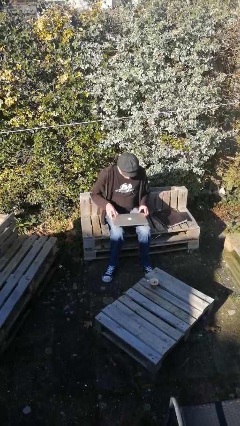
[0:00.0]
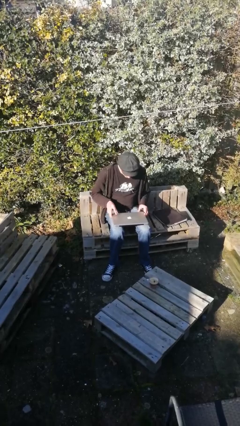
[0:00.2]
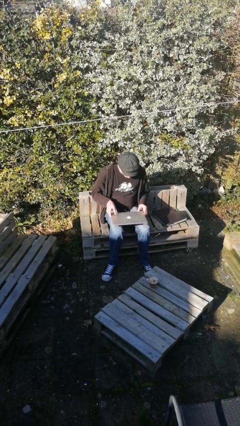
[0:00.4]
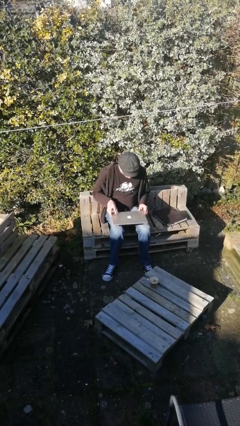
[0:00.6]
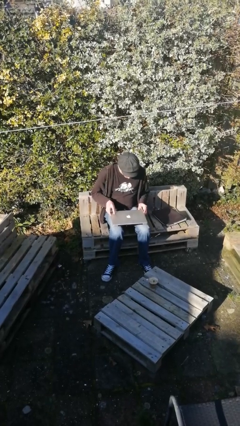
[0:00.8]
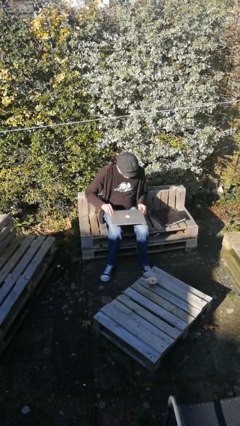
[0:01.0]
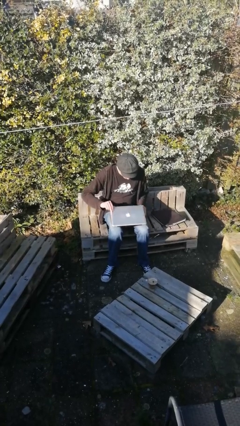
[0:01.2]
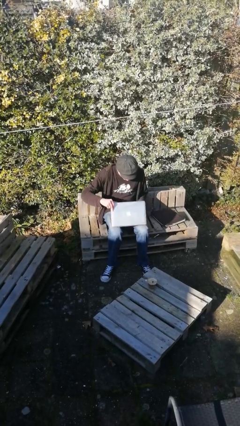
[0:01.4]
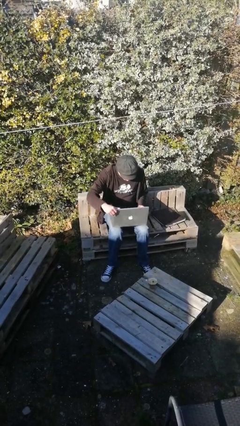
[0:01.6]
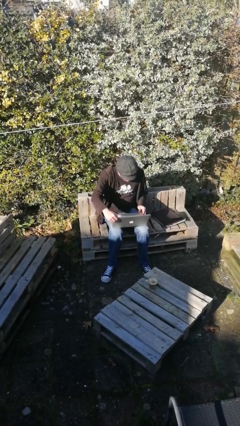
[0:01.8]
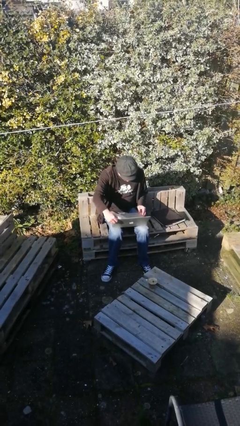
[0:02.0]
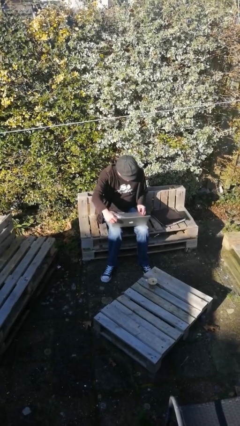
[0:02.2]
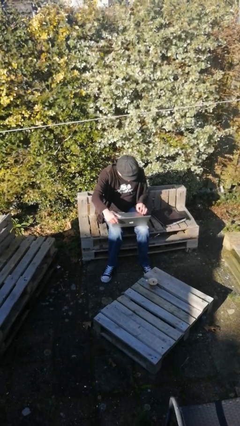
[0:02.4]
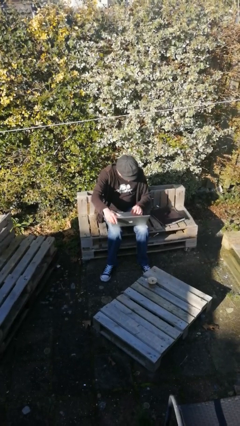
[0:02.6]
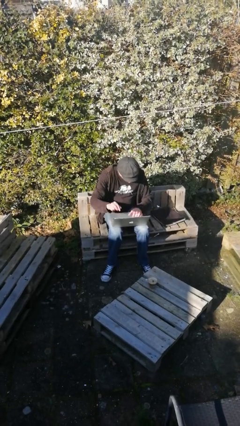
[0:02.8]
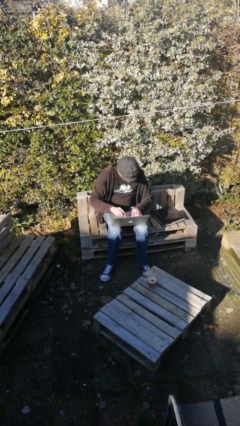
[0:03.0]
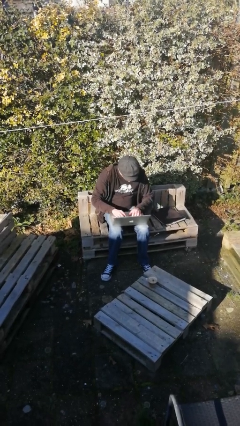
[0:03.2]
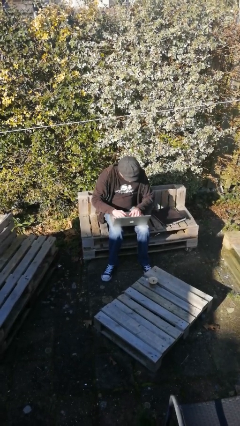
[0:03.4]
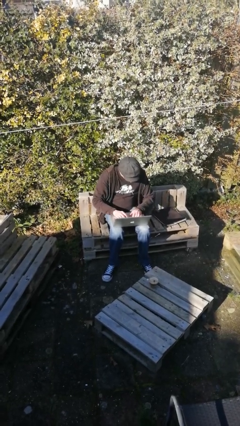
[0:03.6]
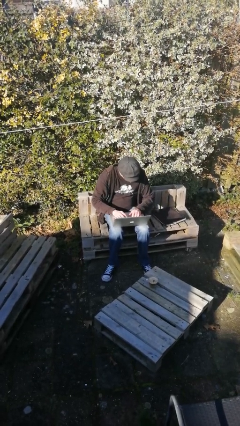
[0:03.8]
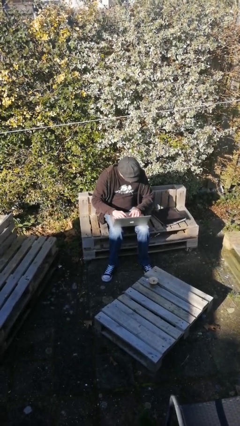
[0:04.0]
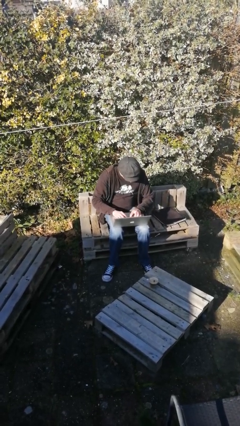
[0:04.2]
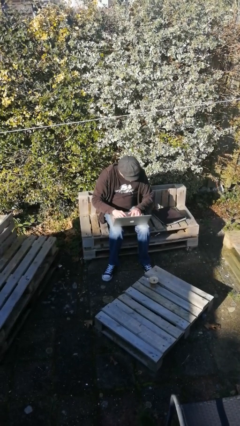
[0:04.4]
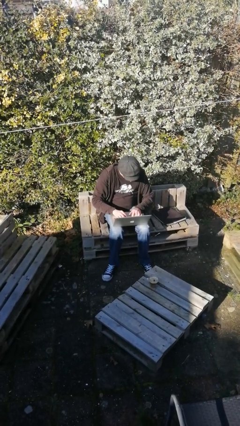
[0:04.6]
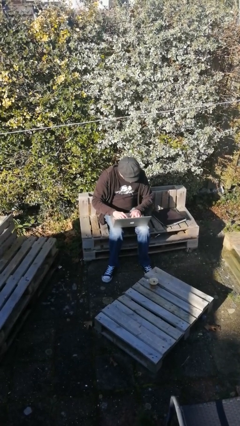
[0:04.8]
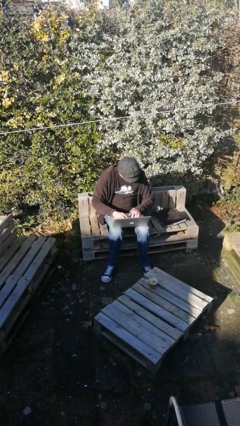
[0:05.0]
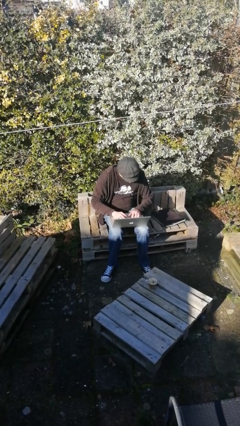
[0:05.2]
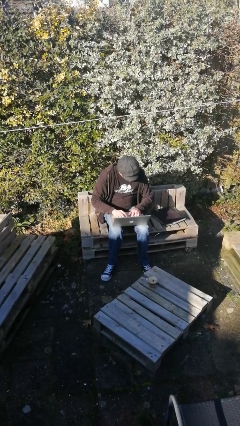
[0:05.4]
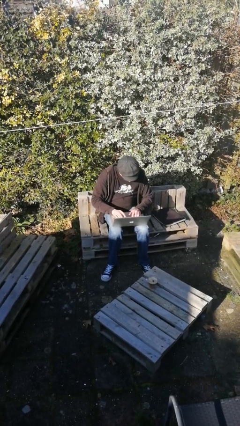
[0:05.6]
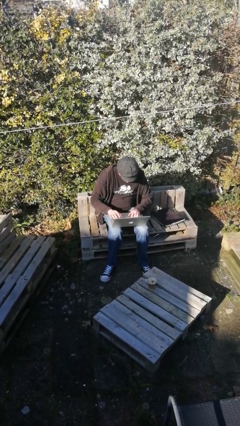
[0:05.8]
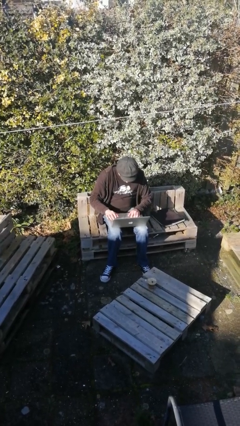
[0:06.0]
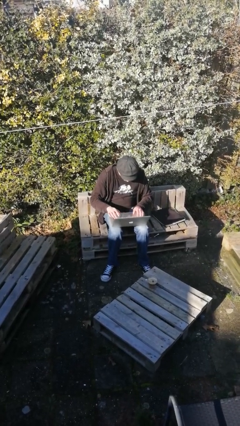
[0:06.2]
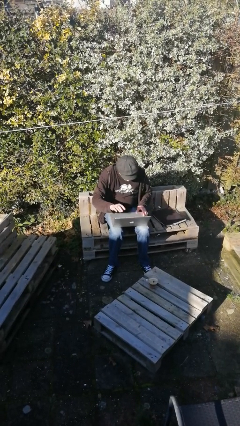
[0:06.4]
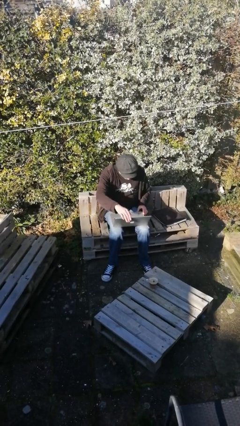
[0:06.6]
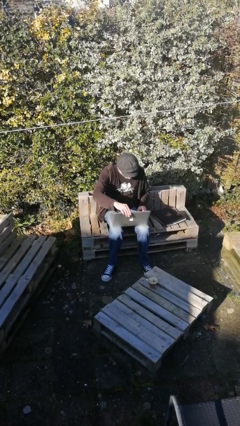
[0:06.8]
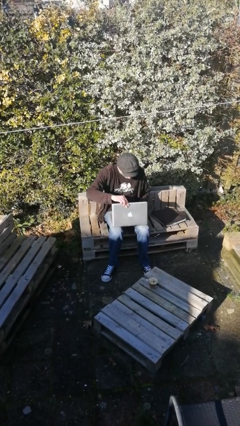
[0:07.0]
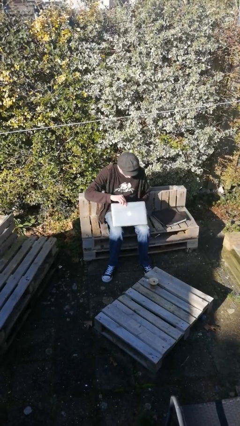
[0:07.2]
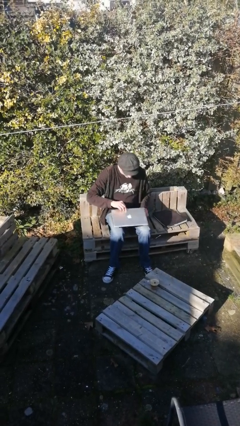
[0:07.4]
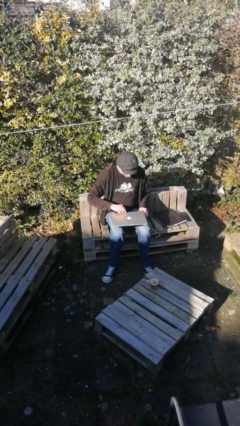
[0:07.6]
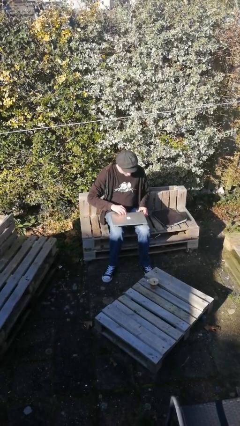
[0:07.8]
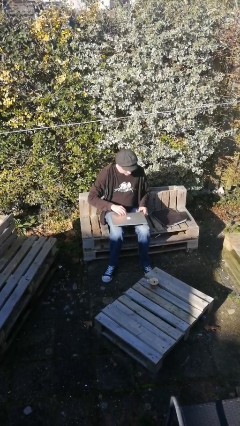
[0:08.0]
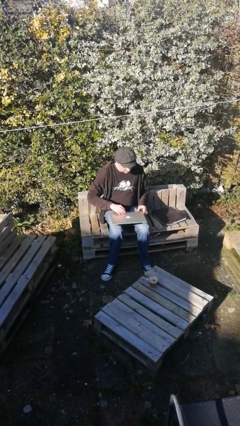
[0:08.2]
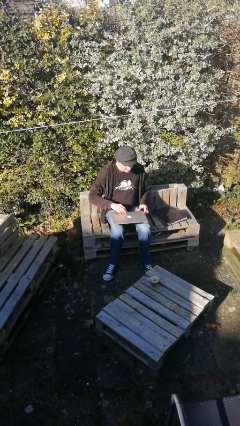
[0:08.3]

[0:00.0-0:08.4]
person interacts with laptop

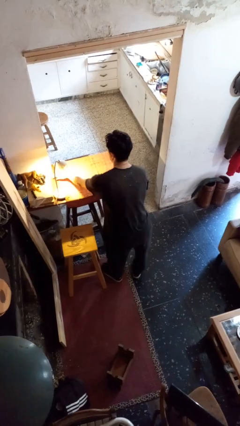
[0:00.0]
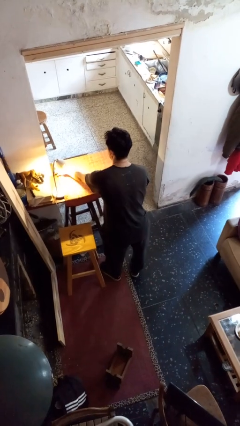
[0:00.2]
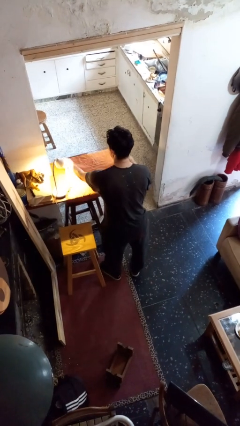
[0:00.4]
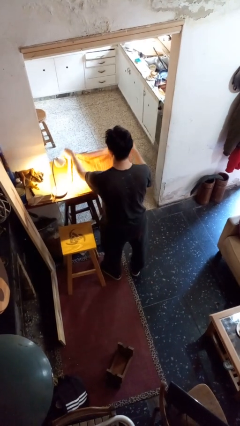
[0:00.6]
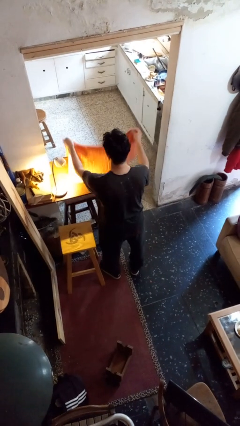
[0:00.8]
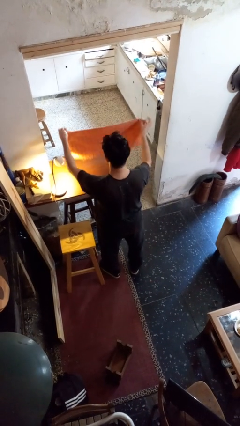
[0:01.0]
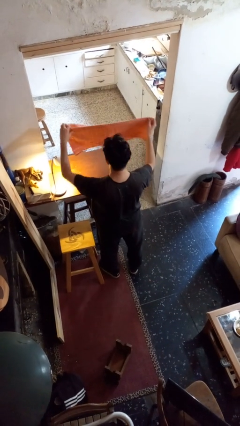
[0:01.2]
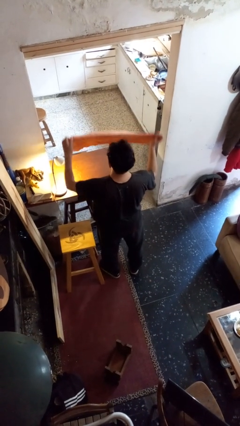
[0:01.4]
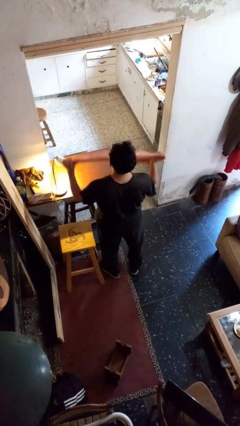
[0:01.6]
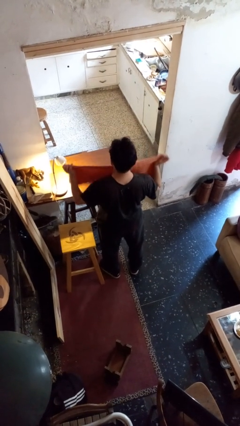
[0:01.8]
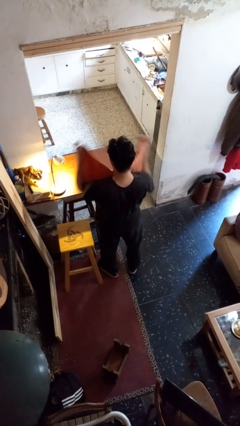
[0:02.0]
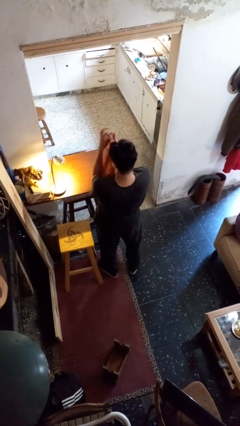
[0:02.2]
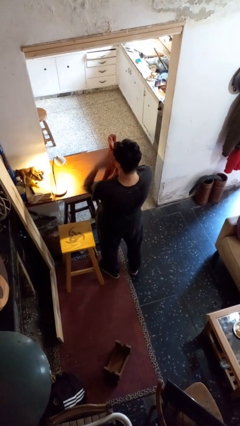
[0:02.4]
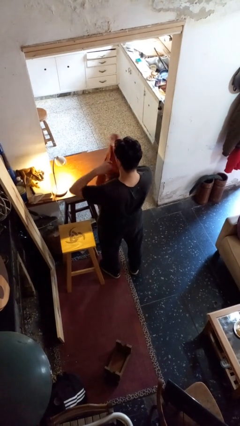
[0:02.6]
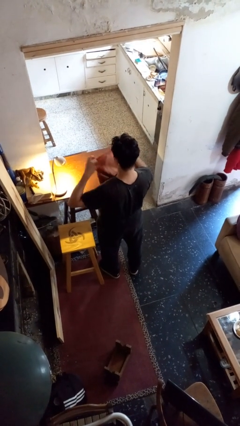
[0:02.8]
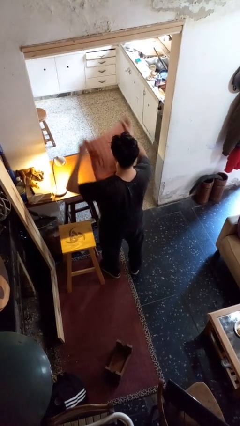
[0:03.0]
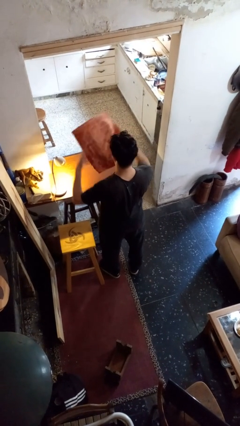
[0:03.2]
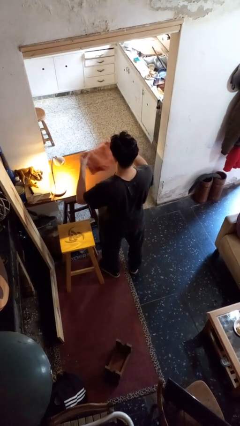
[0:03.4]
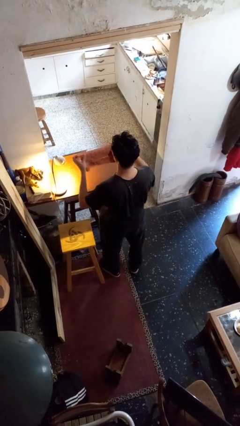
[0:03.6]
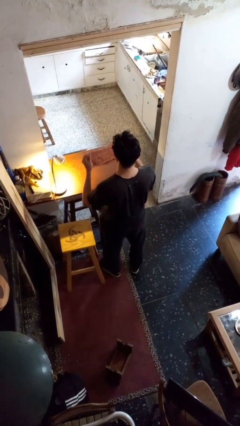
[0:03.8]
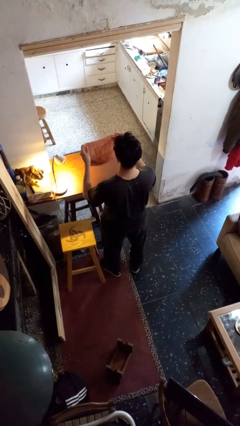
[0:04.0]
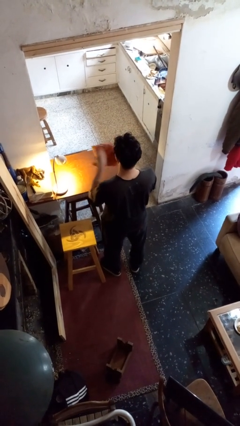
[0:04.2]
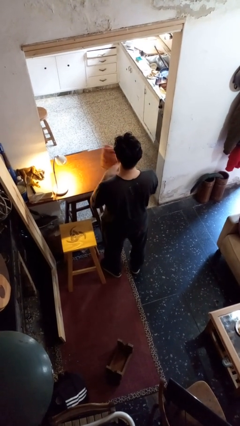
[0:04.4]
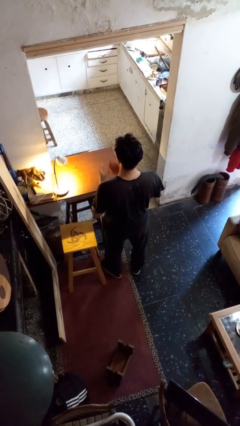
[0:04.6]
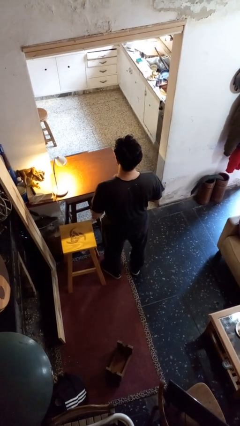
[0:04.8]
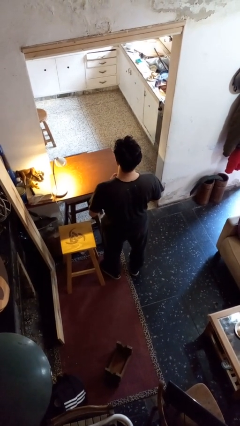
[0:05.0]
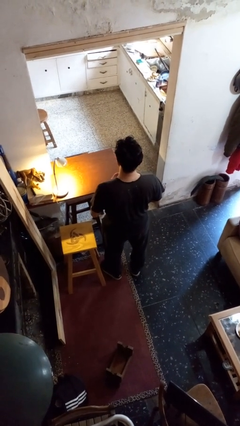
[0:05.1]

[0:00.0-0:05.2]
person folds tablecloth

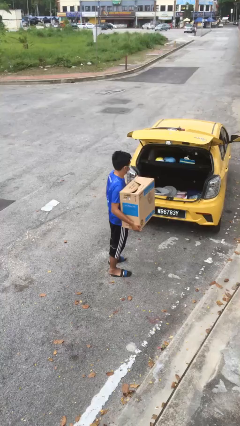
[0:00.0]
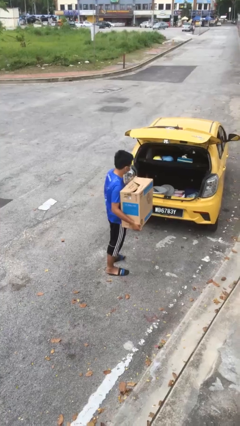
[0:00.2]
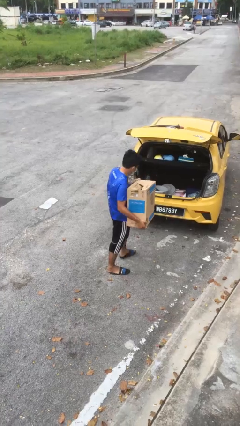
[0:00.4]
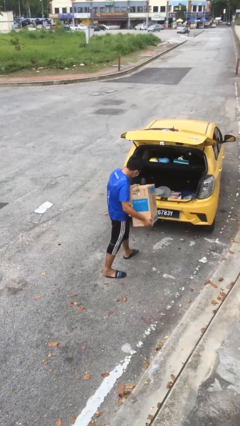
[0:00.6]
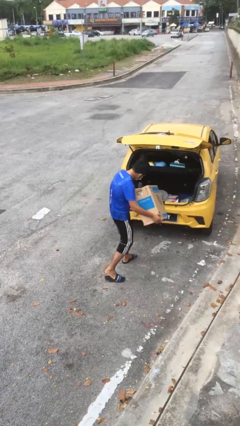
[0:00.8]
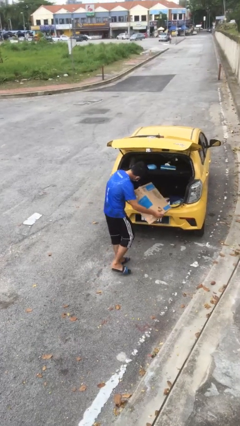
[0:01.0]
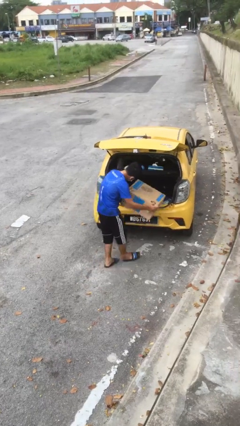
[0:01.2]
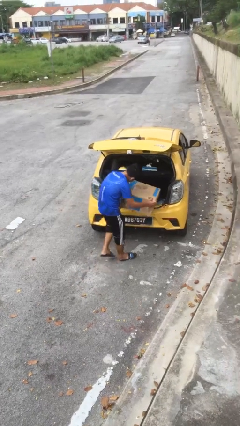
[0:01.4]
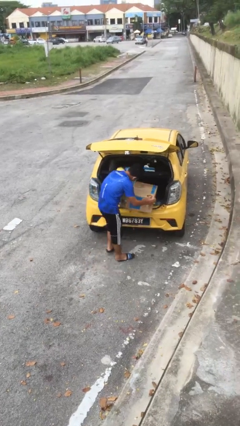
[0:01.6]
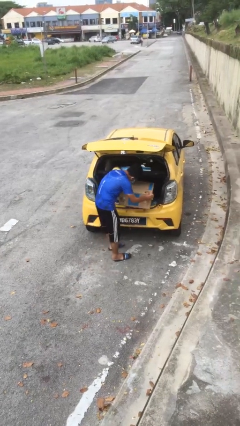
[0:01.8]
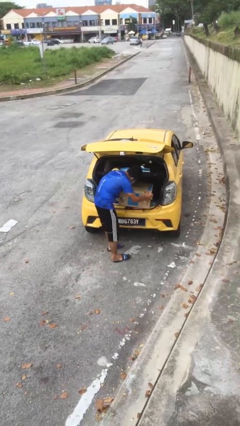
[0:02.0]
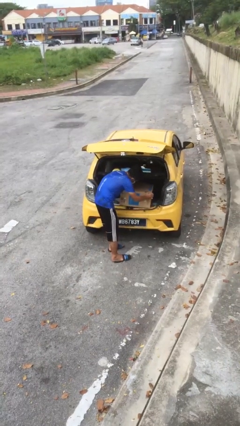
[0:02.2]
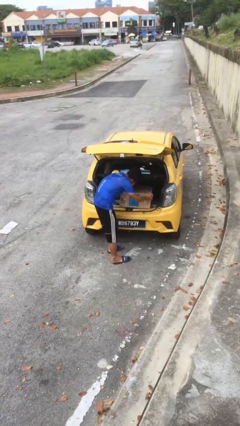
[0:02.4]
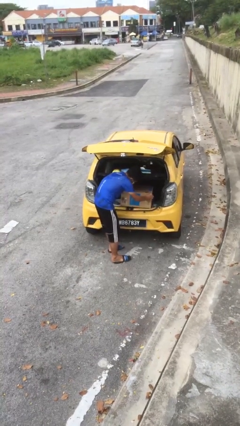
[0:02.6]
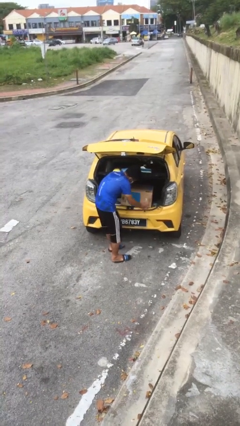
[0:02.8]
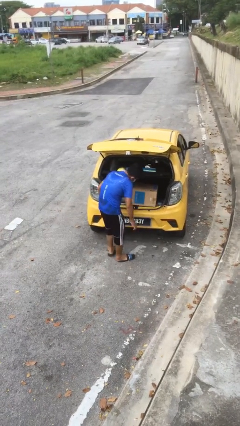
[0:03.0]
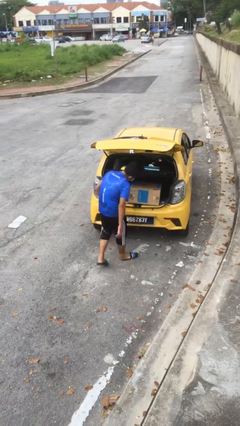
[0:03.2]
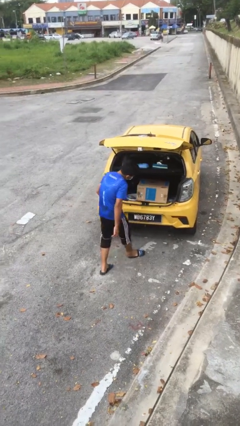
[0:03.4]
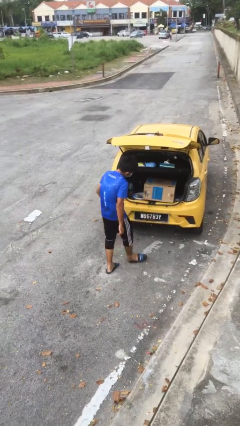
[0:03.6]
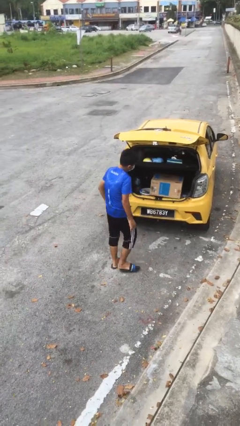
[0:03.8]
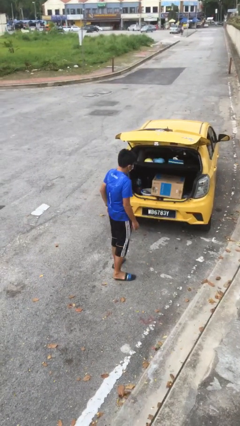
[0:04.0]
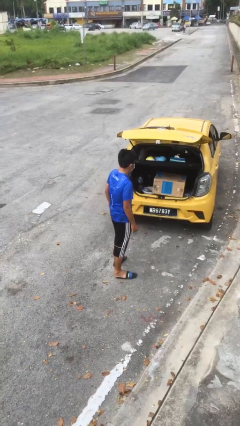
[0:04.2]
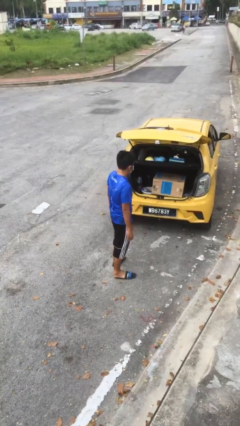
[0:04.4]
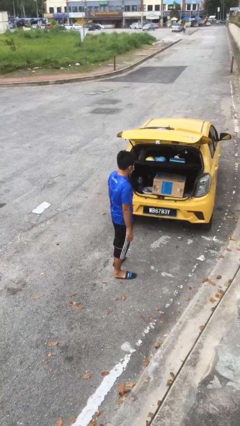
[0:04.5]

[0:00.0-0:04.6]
person loads car
